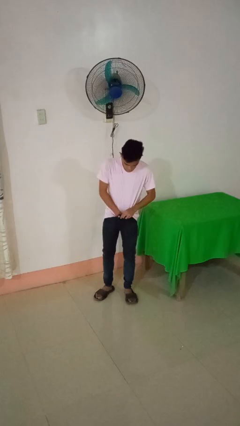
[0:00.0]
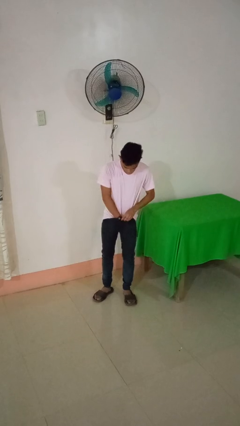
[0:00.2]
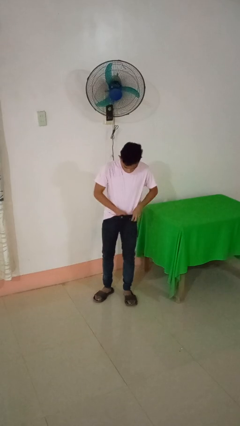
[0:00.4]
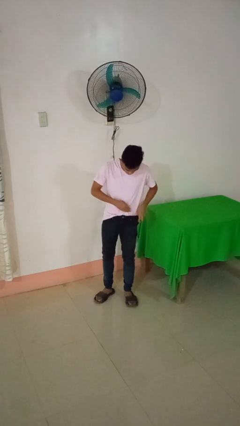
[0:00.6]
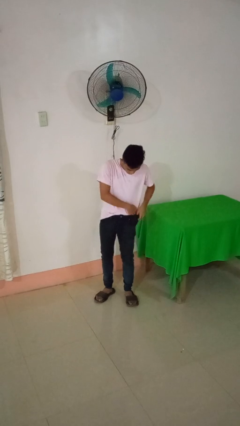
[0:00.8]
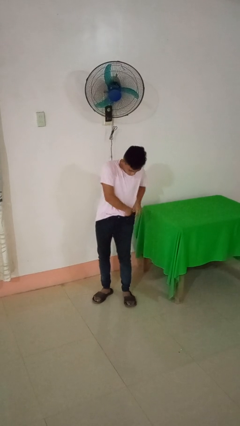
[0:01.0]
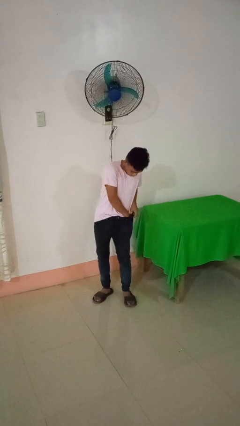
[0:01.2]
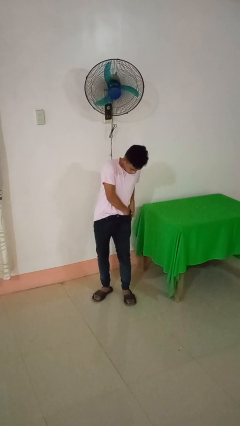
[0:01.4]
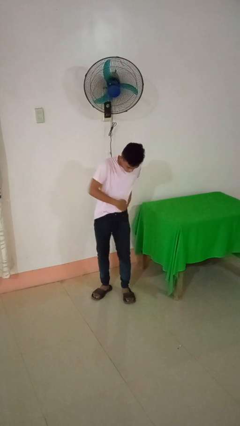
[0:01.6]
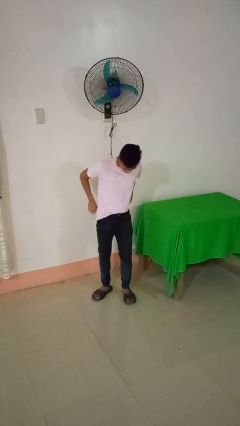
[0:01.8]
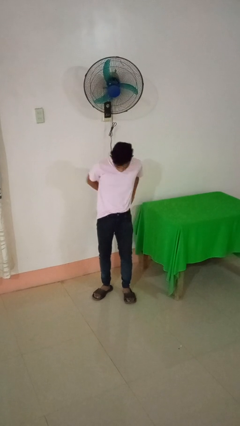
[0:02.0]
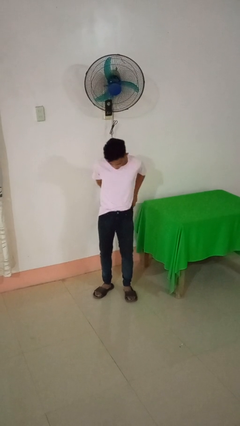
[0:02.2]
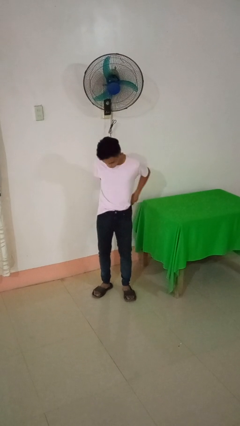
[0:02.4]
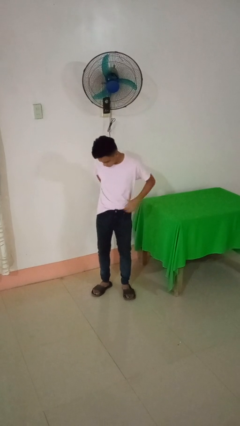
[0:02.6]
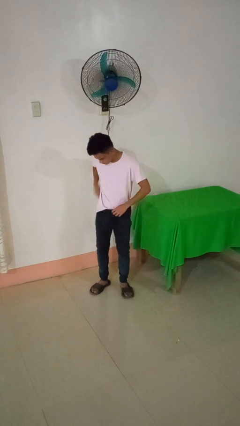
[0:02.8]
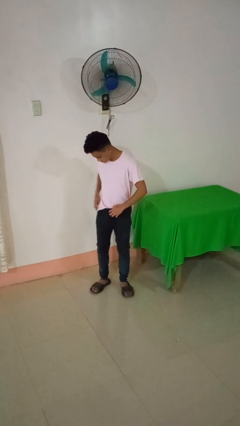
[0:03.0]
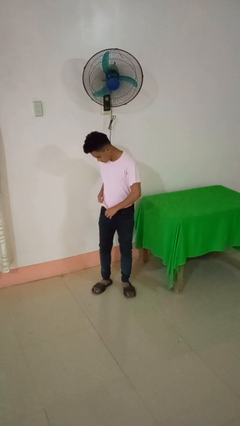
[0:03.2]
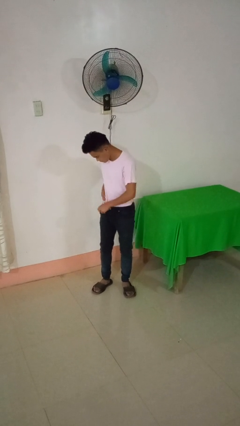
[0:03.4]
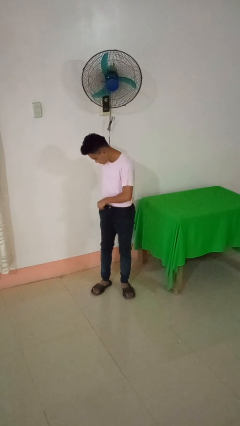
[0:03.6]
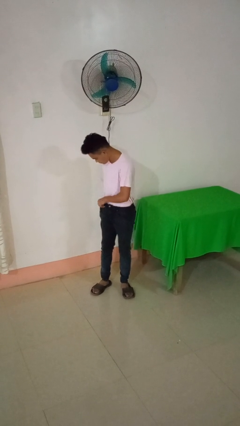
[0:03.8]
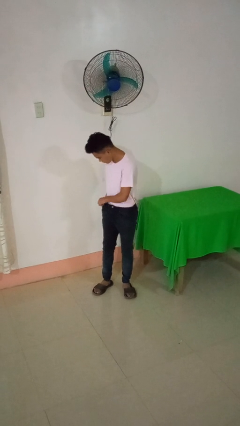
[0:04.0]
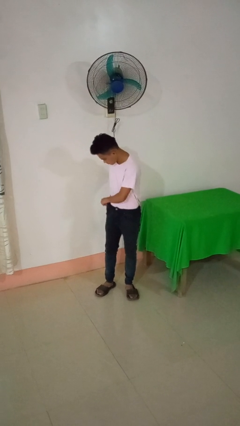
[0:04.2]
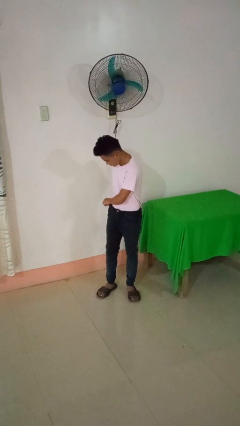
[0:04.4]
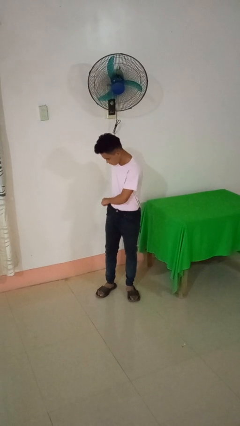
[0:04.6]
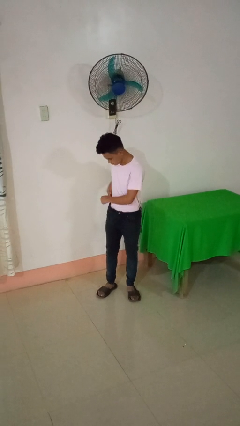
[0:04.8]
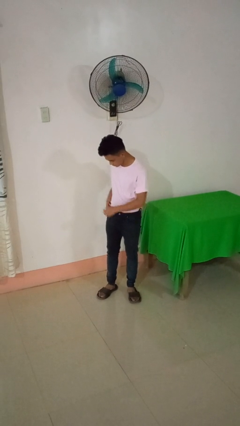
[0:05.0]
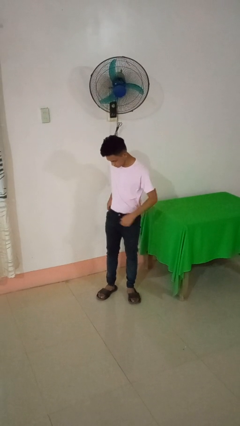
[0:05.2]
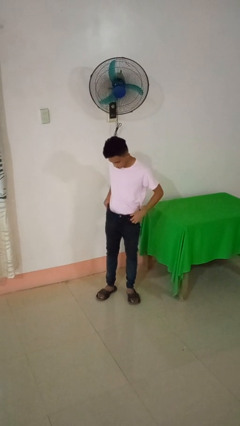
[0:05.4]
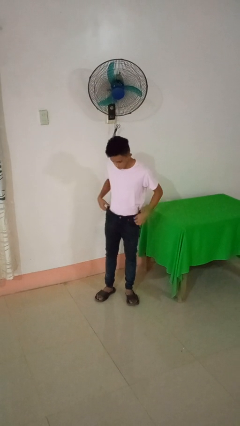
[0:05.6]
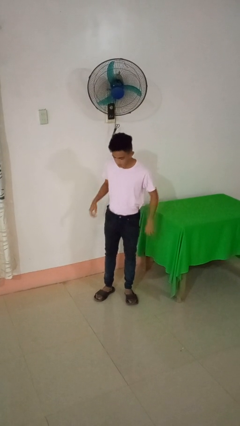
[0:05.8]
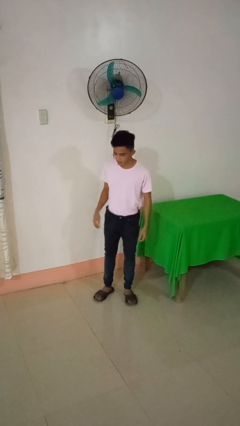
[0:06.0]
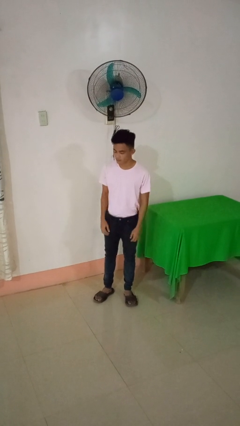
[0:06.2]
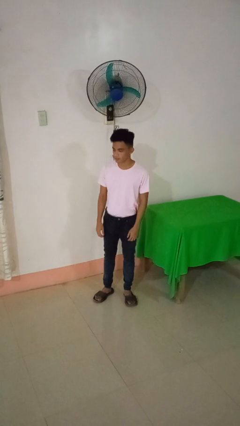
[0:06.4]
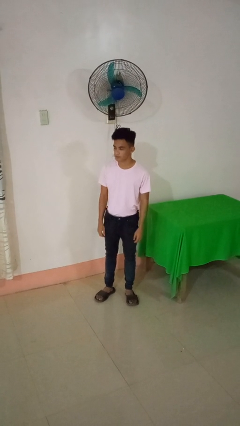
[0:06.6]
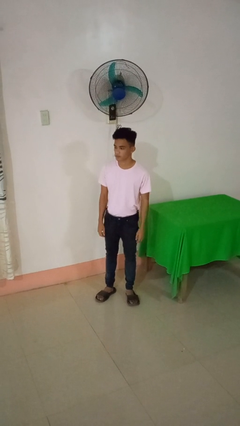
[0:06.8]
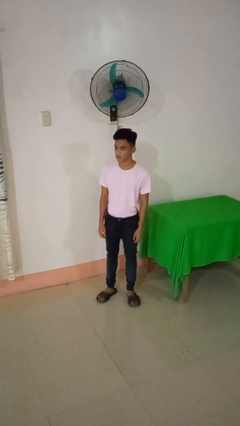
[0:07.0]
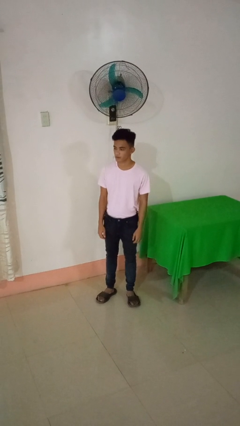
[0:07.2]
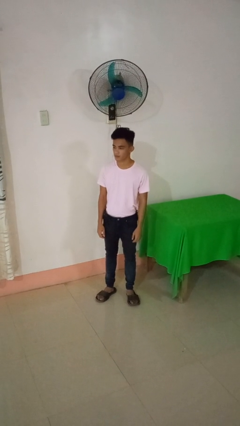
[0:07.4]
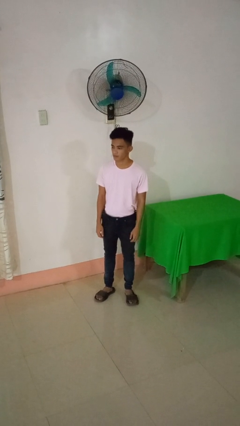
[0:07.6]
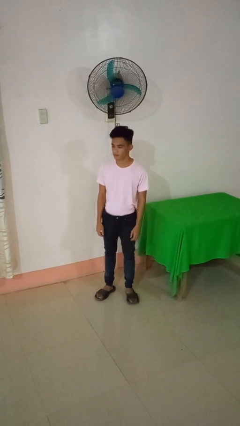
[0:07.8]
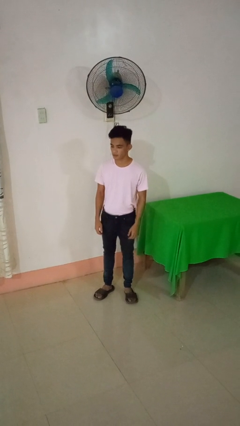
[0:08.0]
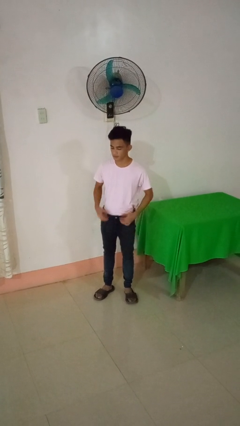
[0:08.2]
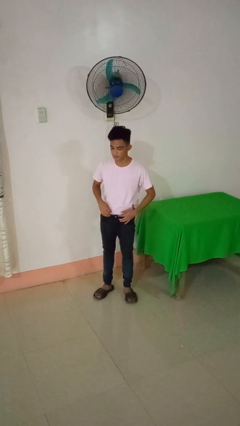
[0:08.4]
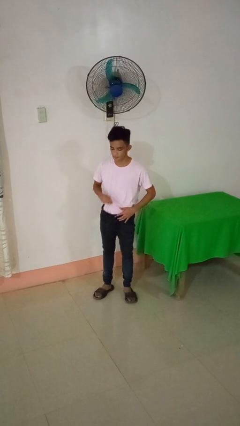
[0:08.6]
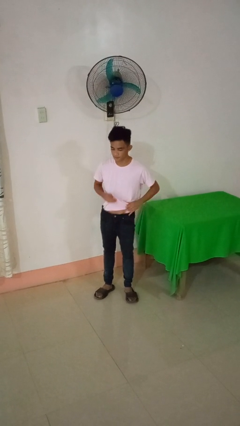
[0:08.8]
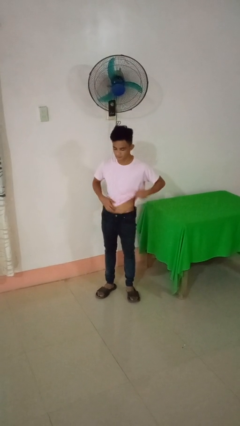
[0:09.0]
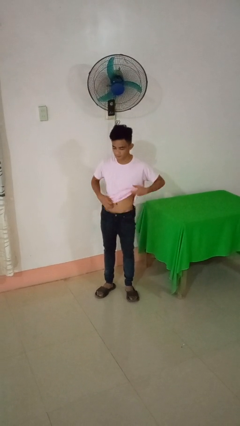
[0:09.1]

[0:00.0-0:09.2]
person tucks in shirt

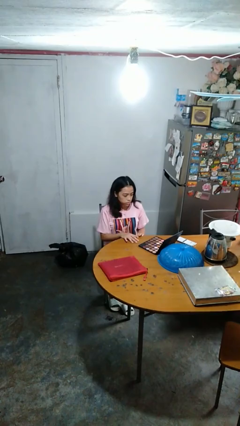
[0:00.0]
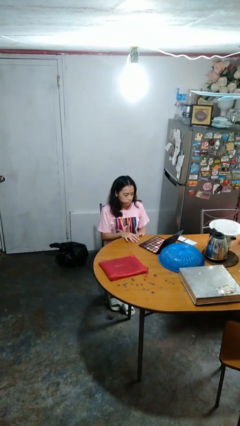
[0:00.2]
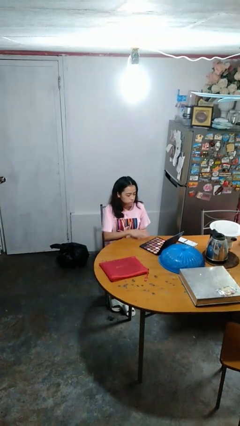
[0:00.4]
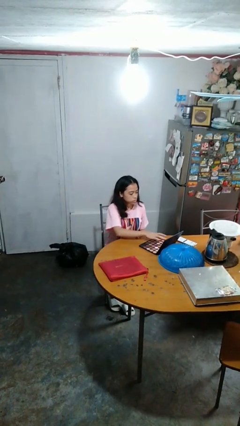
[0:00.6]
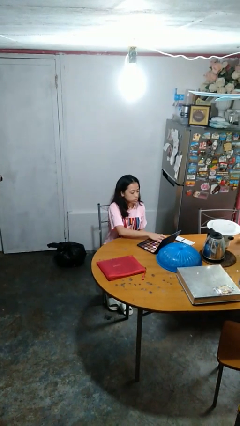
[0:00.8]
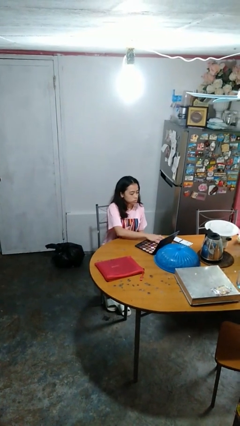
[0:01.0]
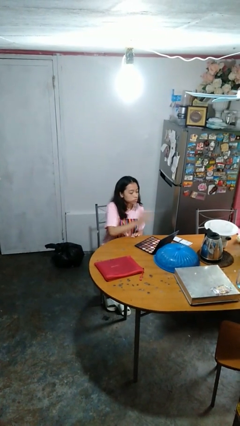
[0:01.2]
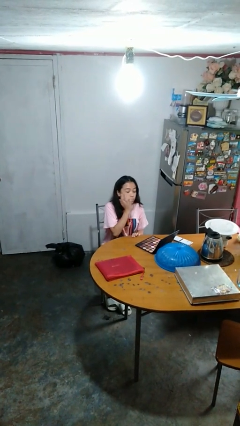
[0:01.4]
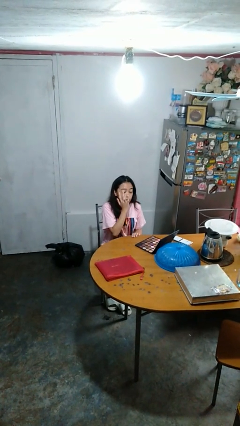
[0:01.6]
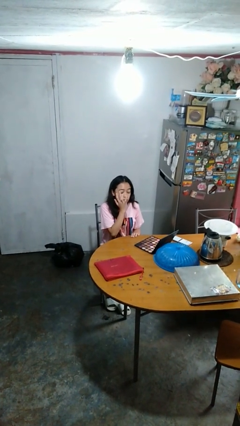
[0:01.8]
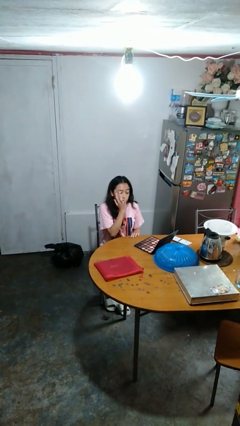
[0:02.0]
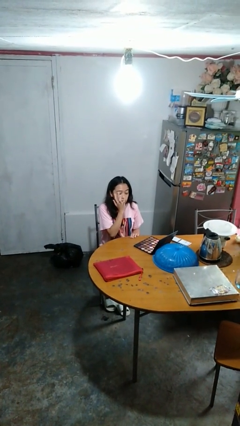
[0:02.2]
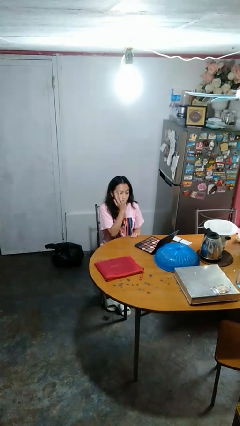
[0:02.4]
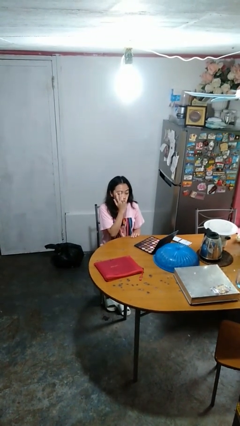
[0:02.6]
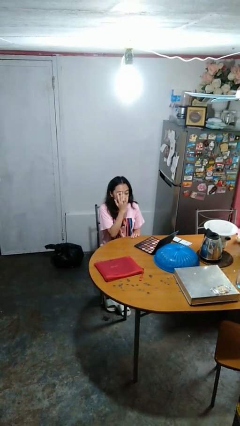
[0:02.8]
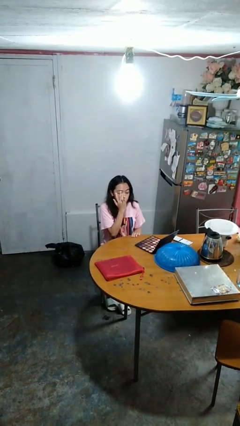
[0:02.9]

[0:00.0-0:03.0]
person applies eye makeup

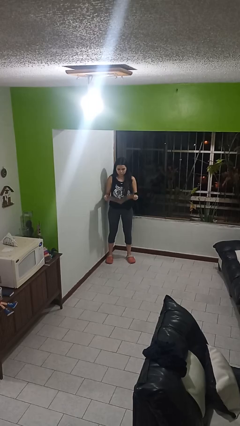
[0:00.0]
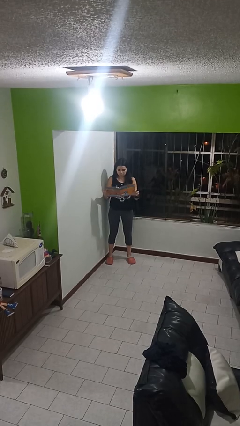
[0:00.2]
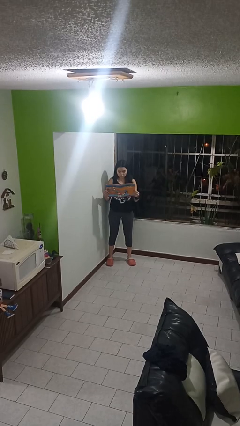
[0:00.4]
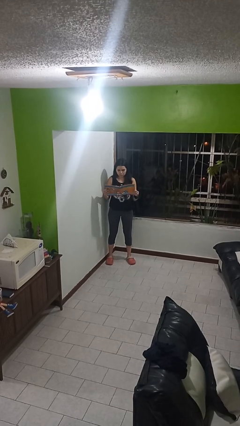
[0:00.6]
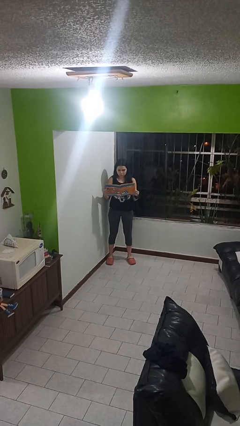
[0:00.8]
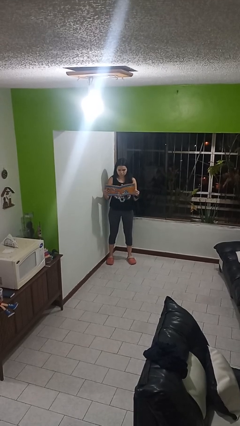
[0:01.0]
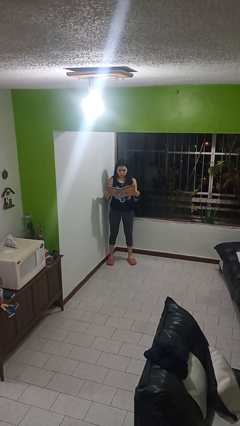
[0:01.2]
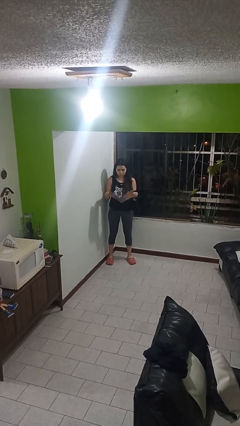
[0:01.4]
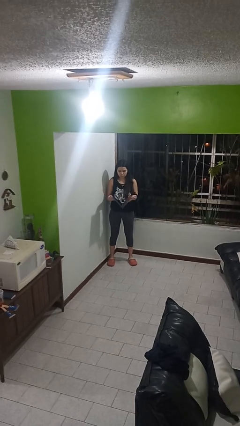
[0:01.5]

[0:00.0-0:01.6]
person reads magazine

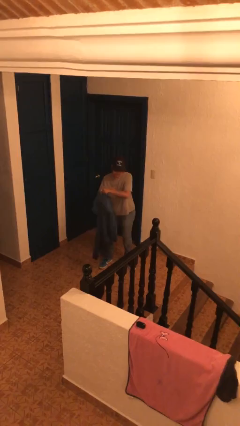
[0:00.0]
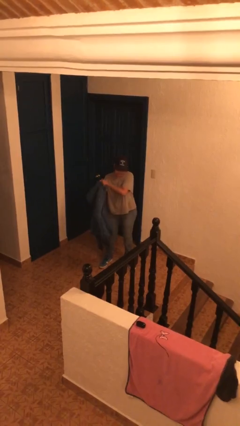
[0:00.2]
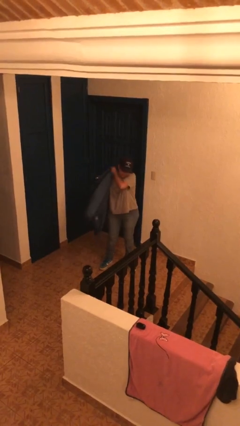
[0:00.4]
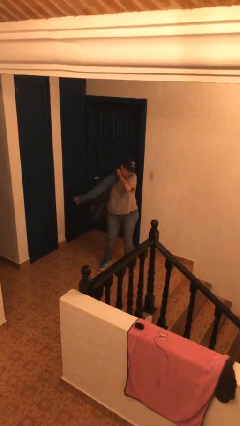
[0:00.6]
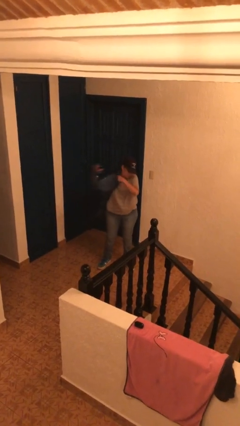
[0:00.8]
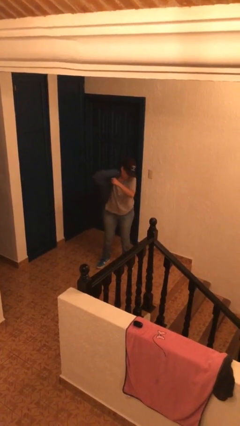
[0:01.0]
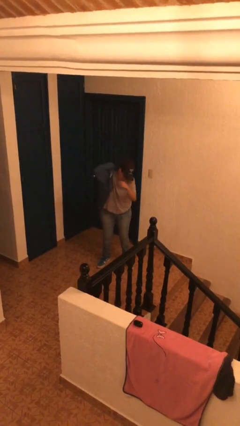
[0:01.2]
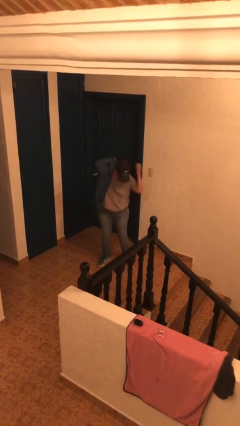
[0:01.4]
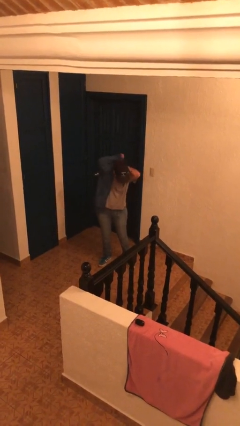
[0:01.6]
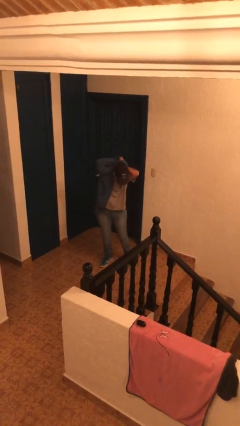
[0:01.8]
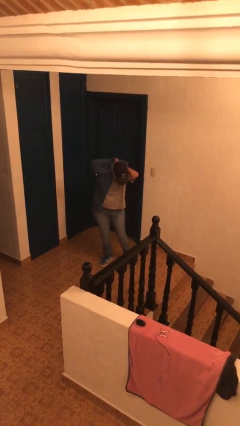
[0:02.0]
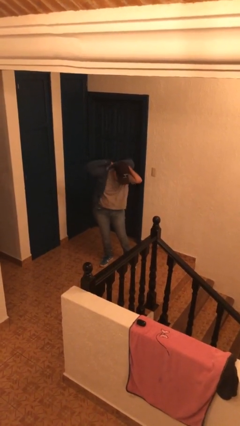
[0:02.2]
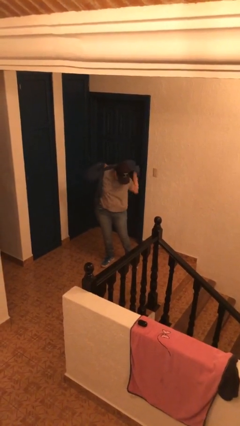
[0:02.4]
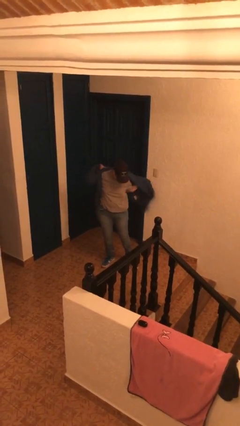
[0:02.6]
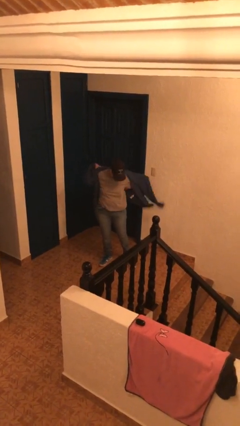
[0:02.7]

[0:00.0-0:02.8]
person puts on jacket

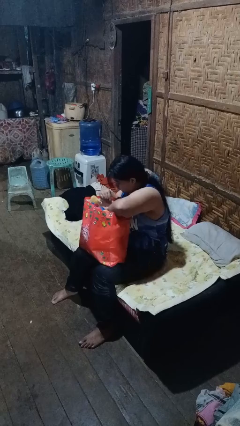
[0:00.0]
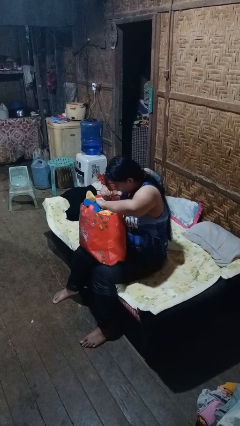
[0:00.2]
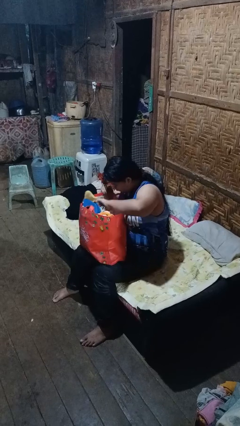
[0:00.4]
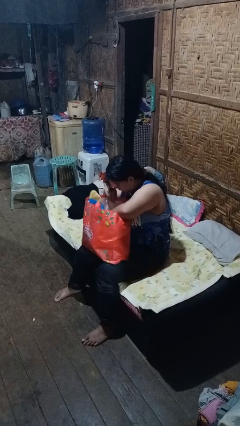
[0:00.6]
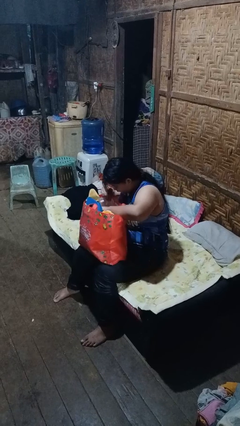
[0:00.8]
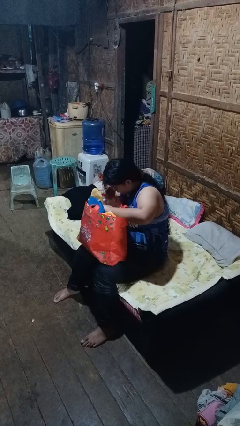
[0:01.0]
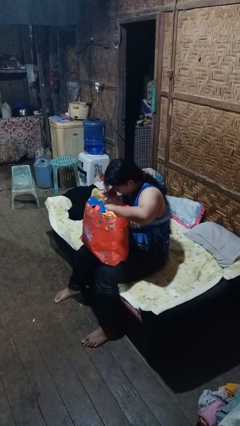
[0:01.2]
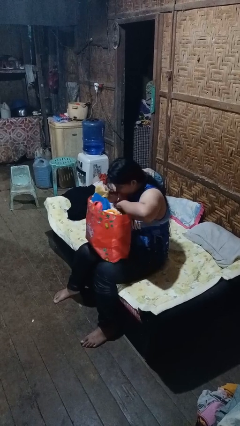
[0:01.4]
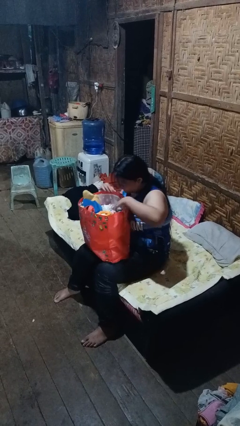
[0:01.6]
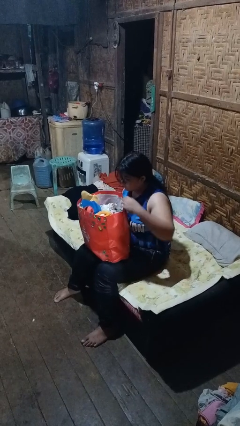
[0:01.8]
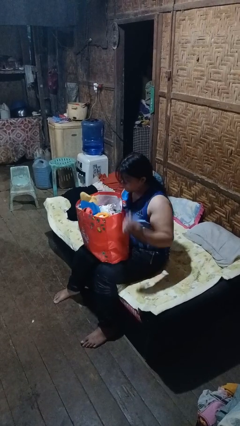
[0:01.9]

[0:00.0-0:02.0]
person searches in bag
